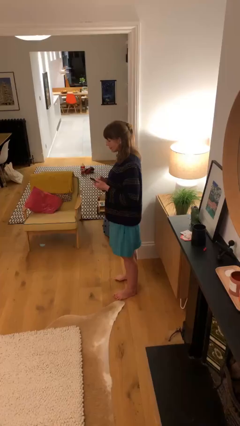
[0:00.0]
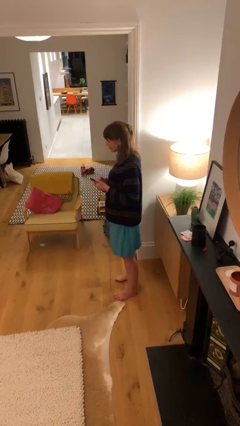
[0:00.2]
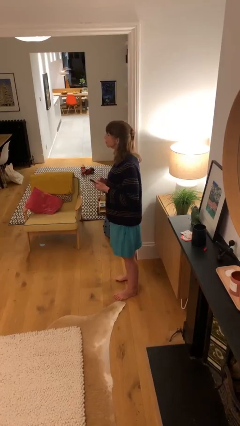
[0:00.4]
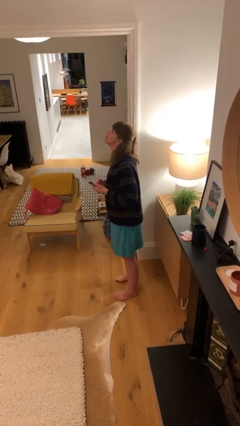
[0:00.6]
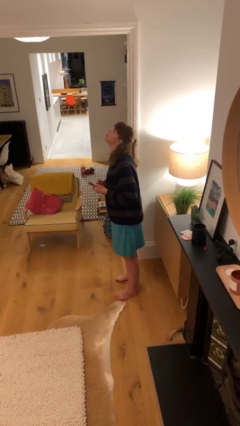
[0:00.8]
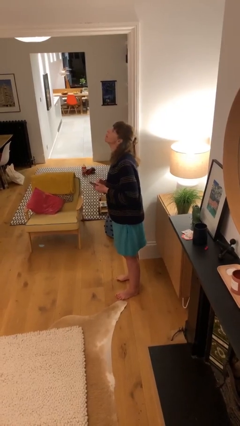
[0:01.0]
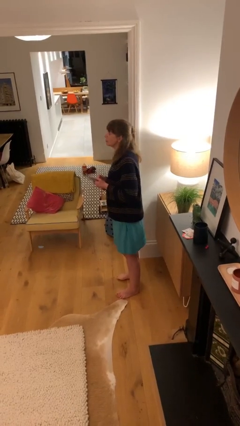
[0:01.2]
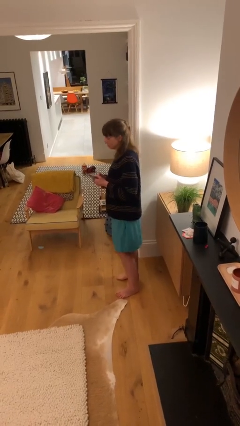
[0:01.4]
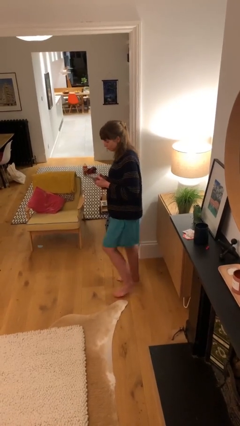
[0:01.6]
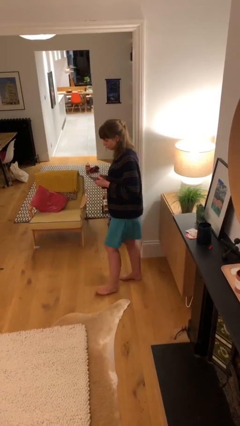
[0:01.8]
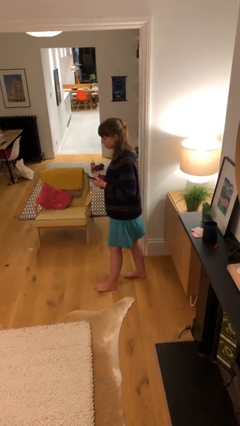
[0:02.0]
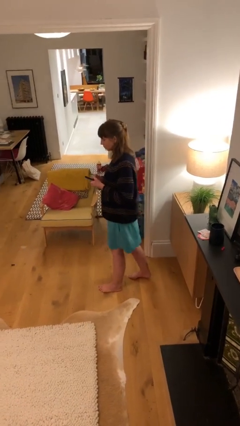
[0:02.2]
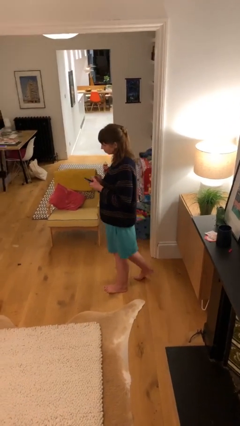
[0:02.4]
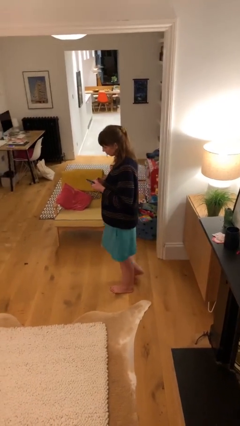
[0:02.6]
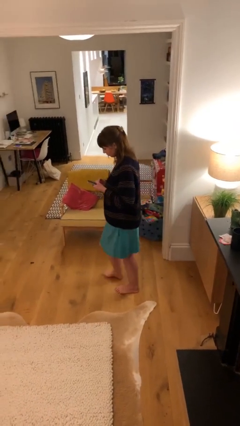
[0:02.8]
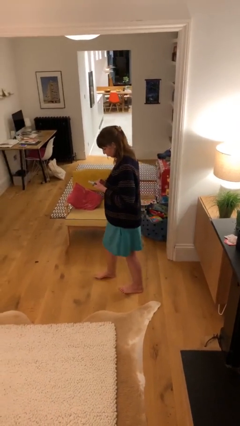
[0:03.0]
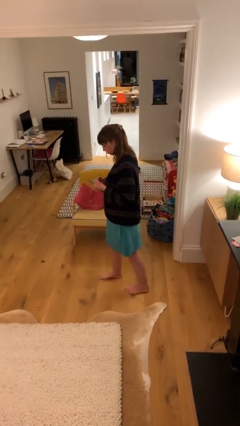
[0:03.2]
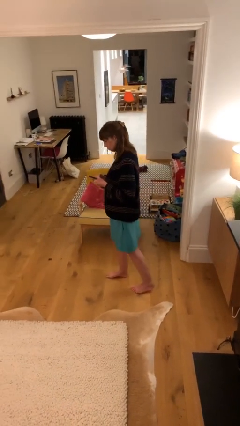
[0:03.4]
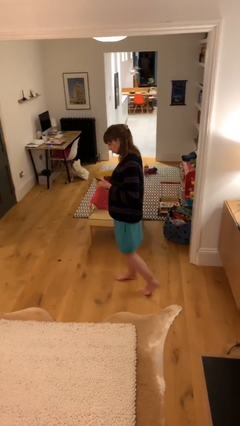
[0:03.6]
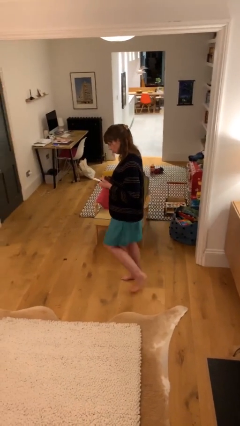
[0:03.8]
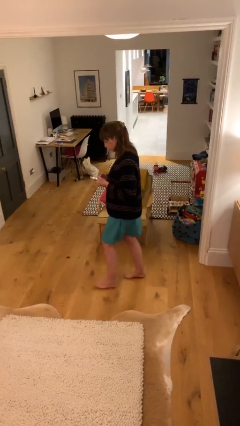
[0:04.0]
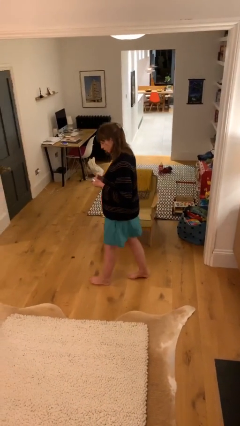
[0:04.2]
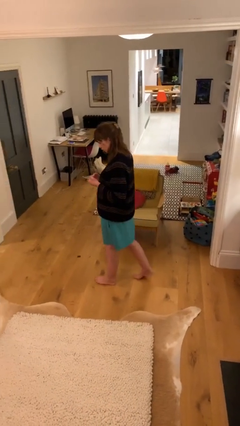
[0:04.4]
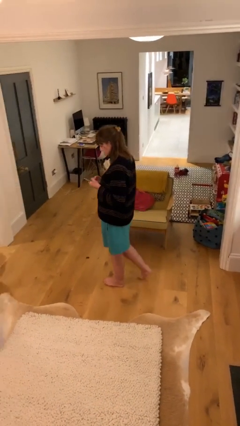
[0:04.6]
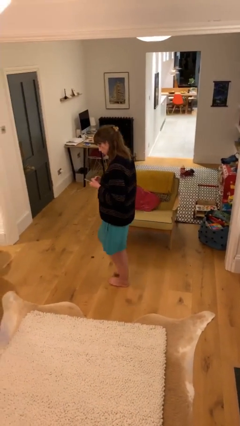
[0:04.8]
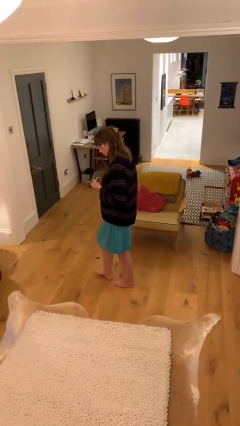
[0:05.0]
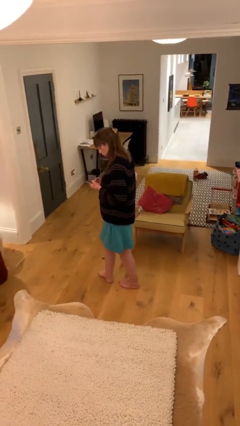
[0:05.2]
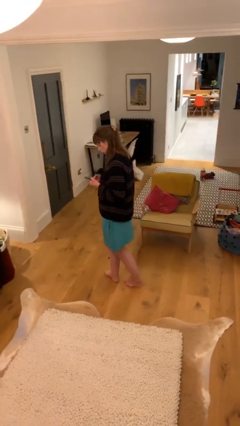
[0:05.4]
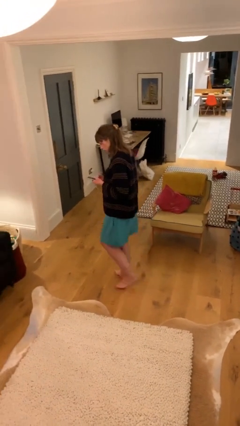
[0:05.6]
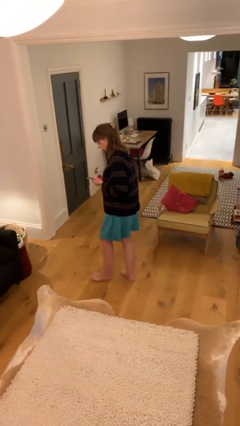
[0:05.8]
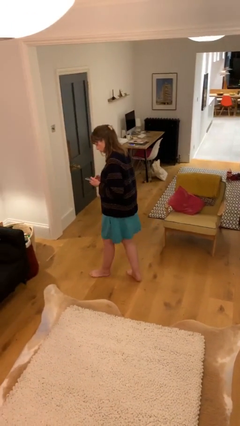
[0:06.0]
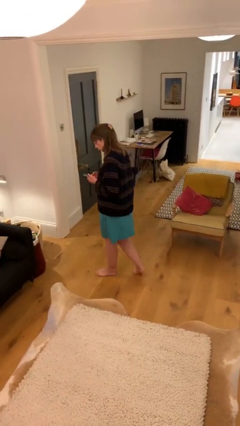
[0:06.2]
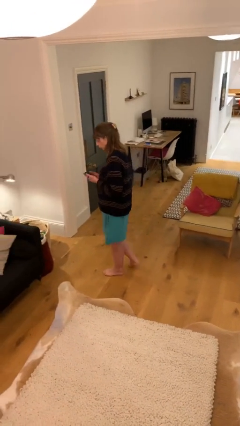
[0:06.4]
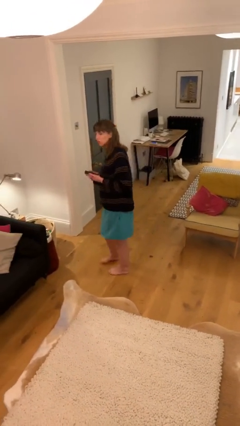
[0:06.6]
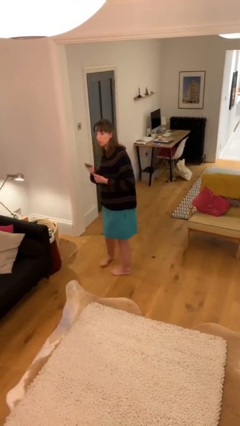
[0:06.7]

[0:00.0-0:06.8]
person texts on phone

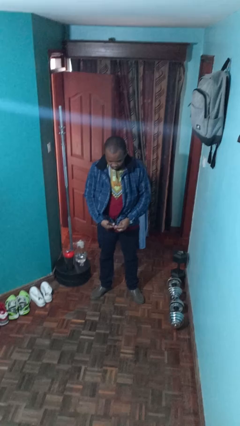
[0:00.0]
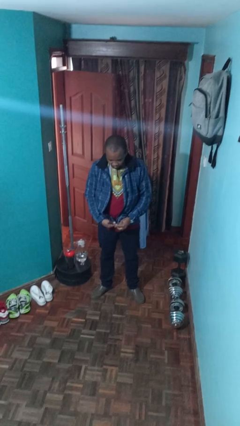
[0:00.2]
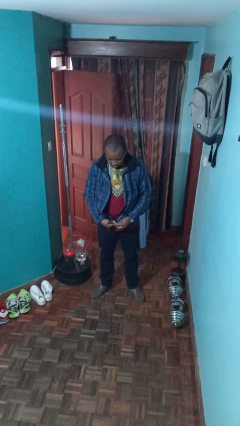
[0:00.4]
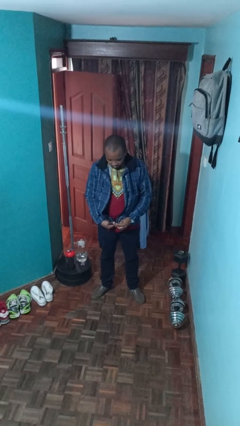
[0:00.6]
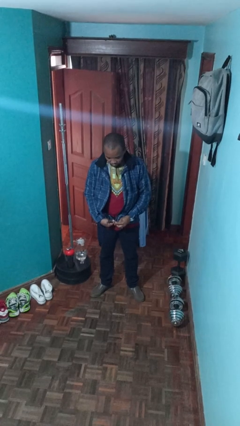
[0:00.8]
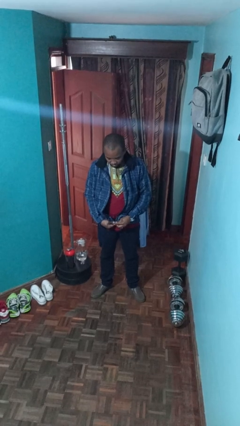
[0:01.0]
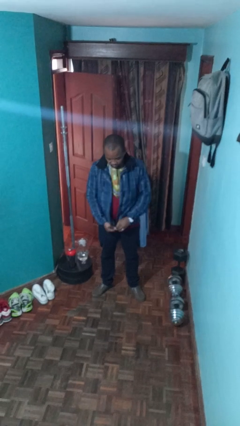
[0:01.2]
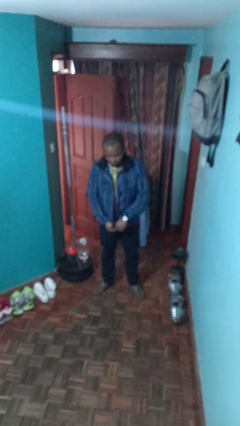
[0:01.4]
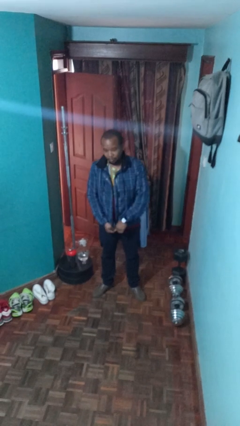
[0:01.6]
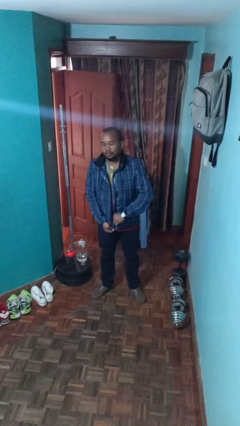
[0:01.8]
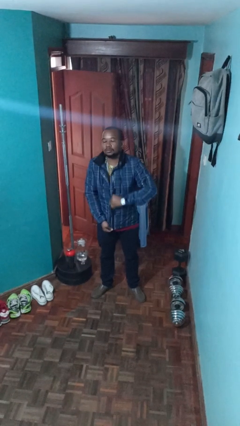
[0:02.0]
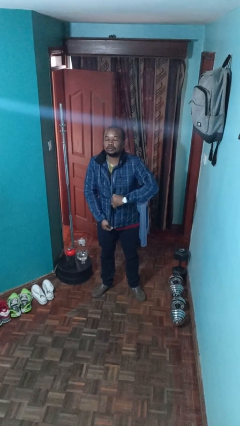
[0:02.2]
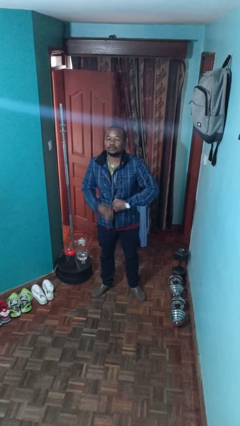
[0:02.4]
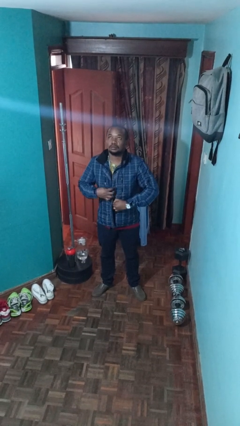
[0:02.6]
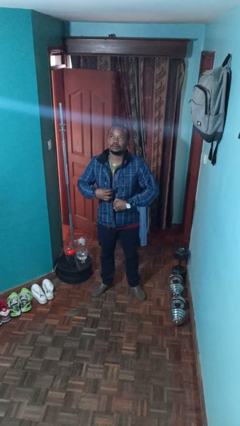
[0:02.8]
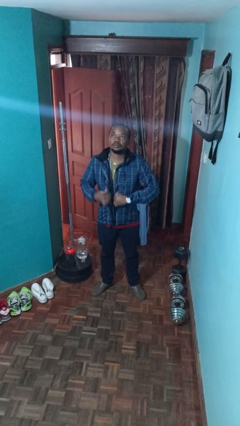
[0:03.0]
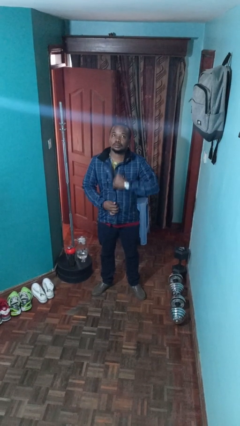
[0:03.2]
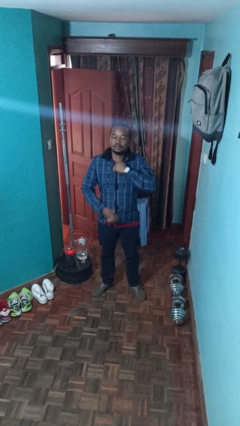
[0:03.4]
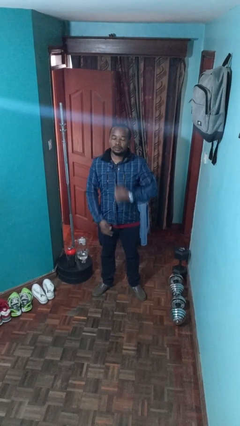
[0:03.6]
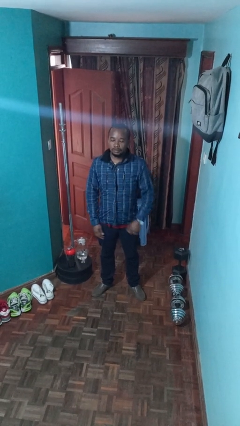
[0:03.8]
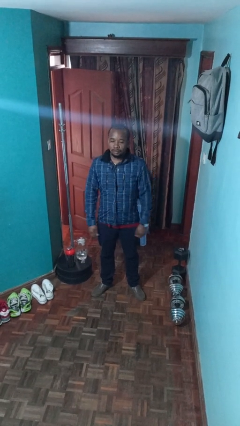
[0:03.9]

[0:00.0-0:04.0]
person zips up jacket

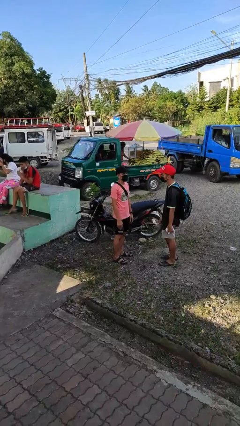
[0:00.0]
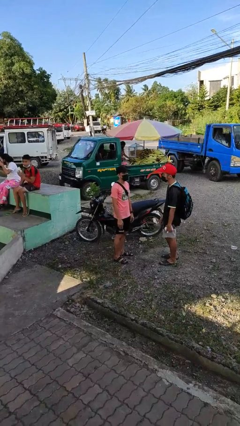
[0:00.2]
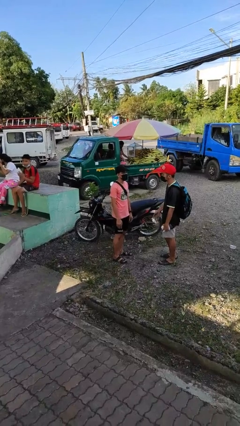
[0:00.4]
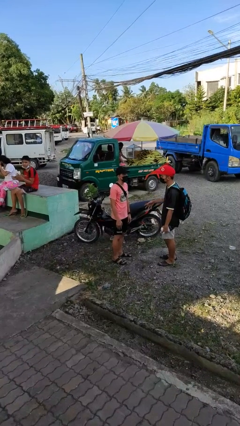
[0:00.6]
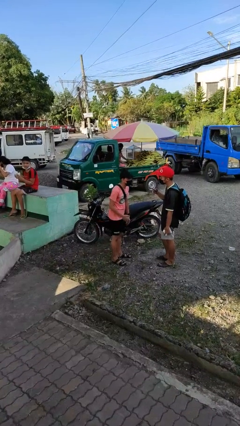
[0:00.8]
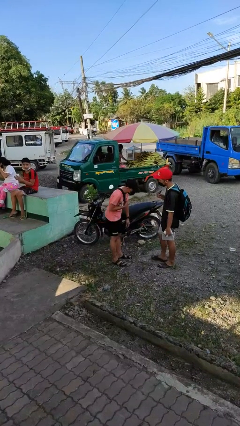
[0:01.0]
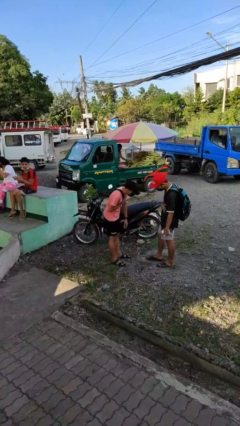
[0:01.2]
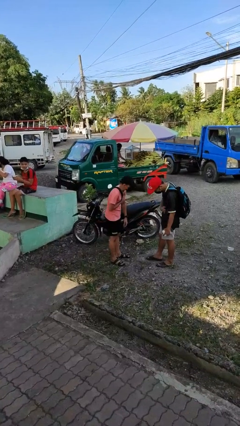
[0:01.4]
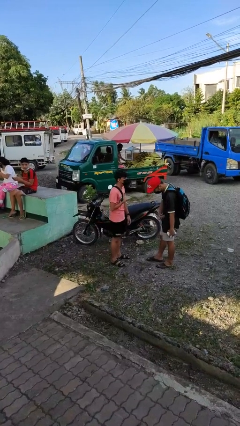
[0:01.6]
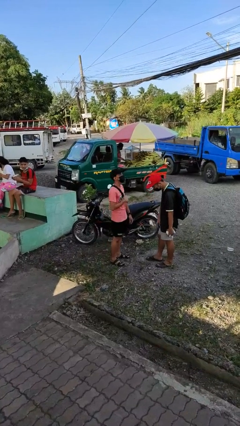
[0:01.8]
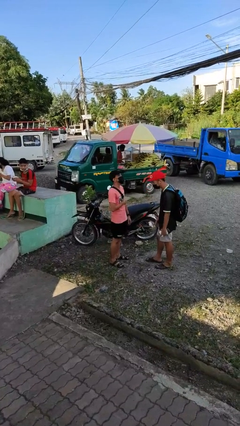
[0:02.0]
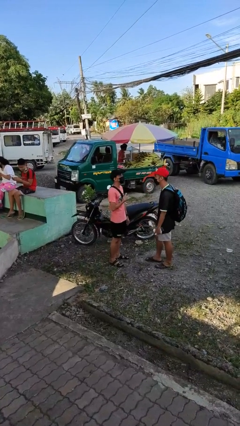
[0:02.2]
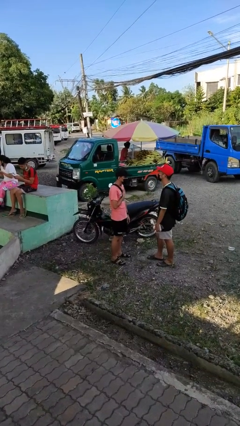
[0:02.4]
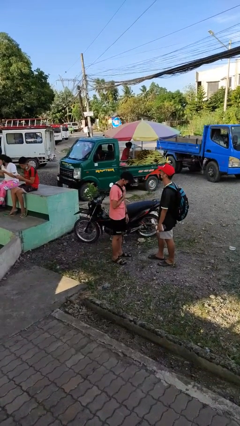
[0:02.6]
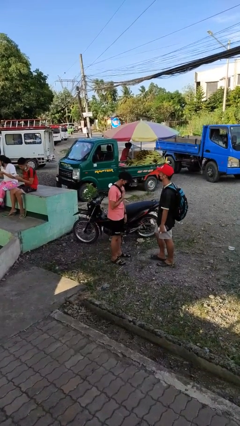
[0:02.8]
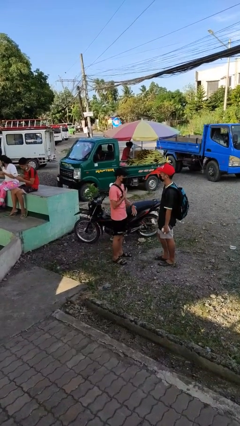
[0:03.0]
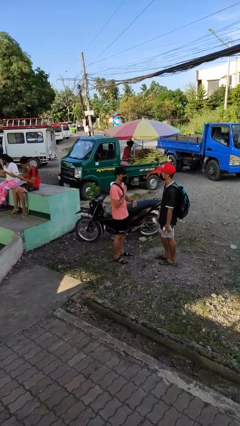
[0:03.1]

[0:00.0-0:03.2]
person laughs with person

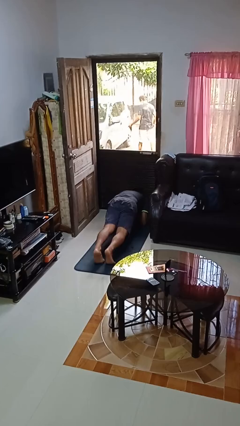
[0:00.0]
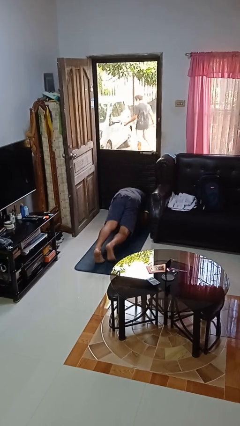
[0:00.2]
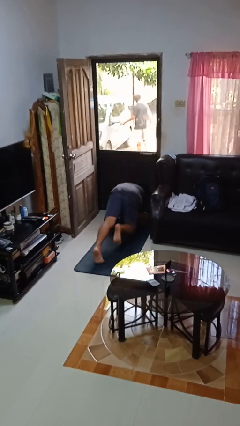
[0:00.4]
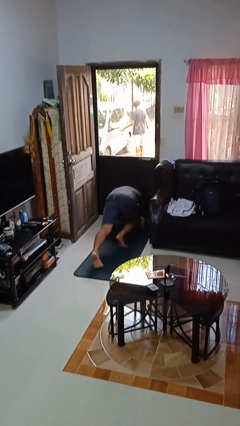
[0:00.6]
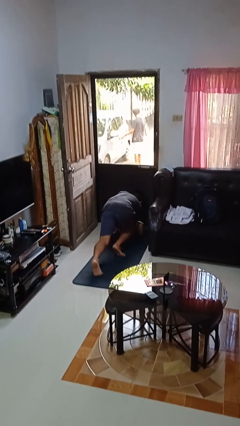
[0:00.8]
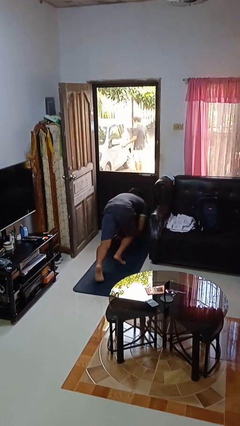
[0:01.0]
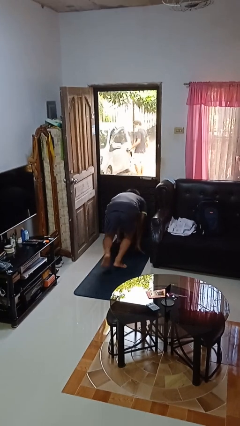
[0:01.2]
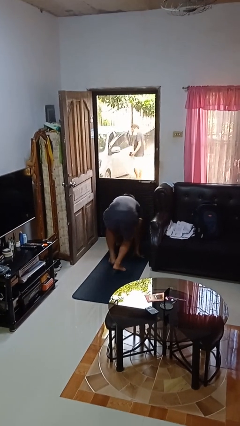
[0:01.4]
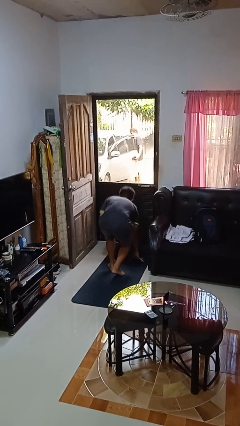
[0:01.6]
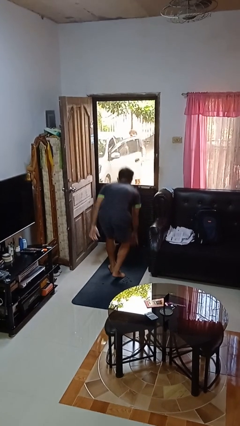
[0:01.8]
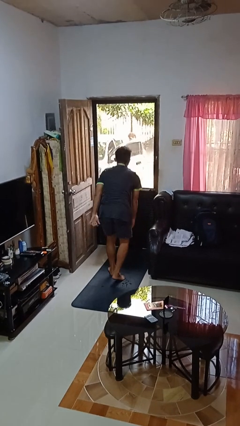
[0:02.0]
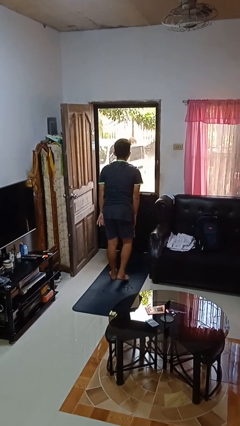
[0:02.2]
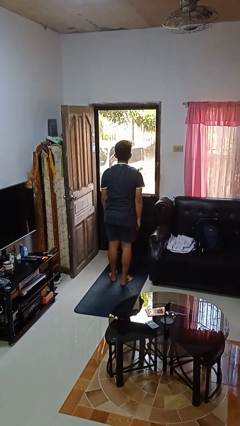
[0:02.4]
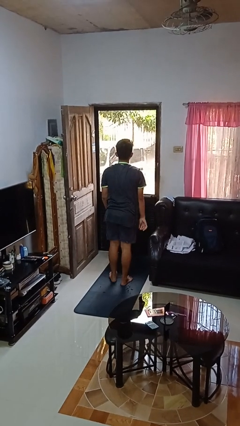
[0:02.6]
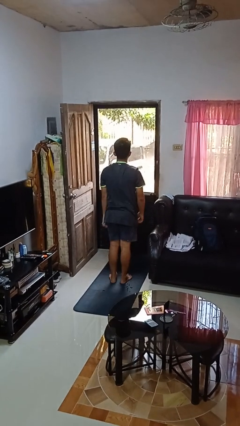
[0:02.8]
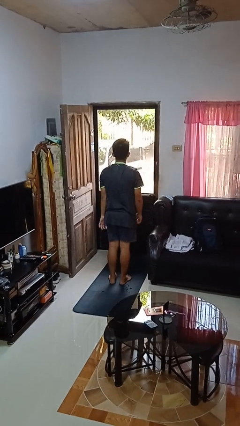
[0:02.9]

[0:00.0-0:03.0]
person stands up from floor

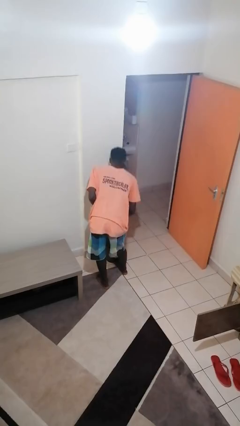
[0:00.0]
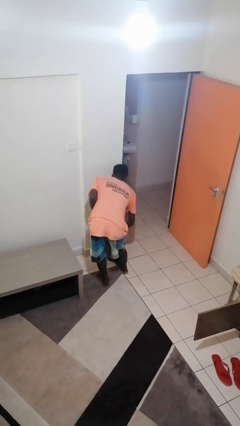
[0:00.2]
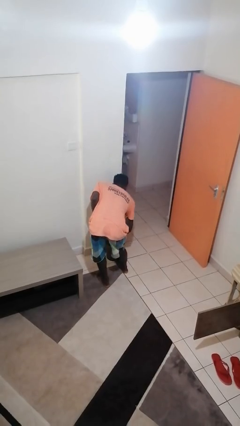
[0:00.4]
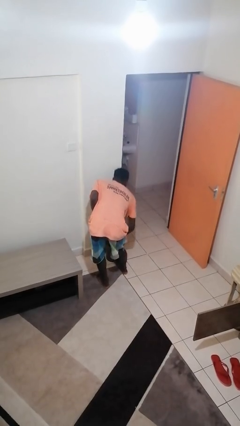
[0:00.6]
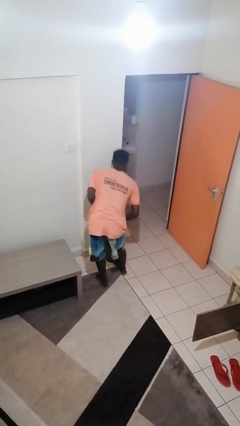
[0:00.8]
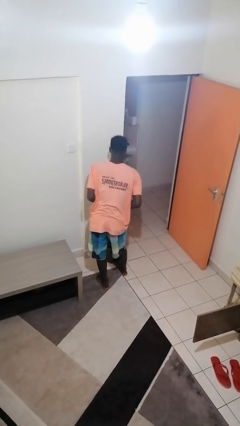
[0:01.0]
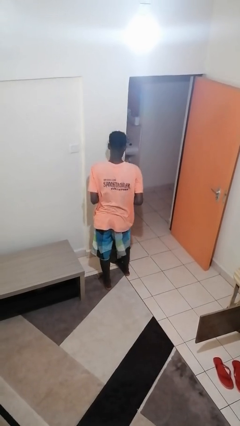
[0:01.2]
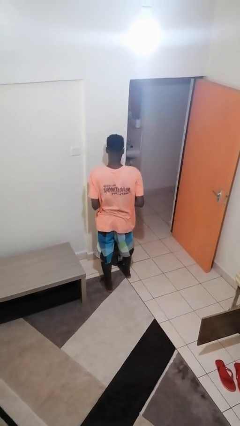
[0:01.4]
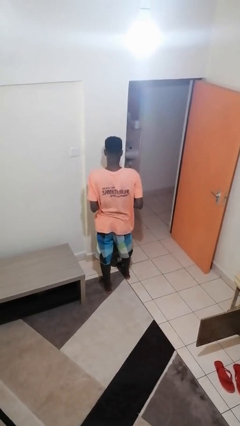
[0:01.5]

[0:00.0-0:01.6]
person discards trash
